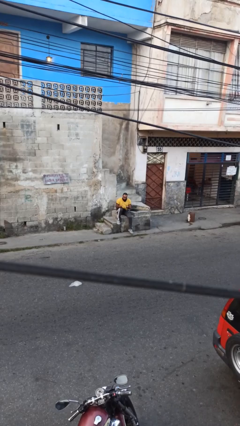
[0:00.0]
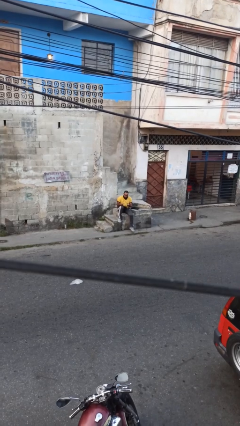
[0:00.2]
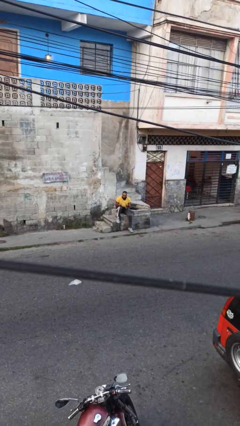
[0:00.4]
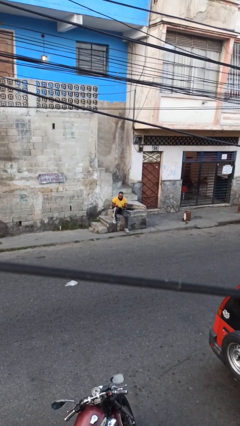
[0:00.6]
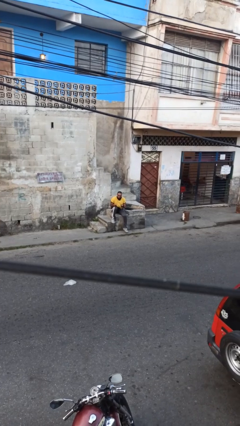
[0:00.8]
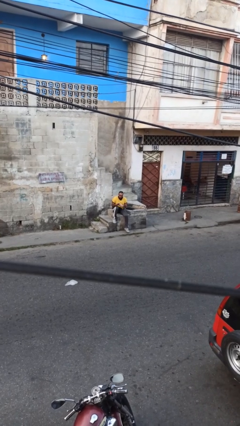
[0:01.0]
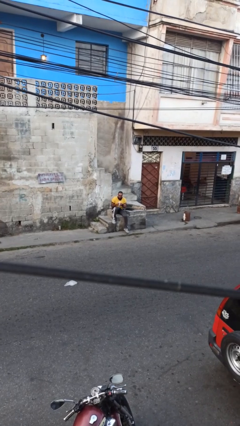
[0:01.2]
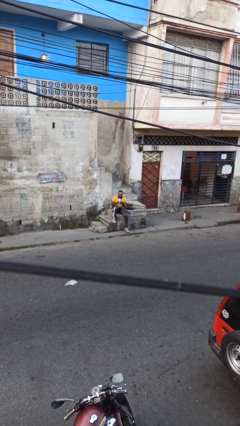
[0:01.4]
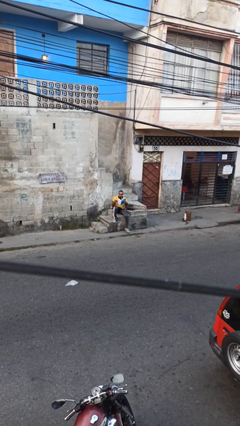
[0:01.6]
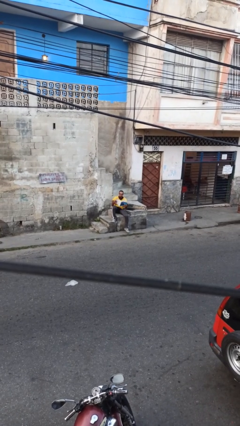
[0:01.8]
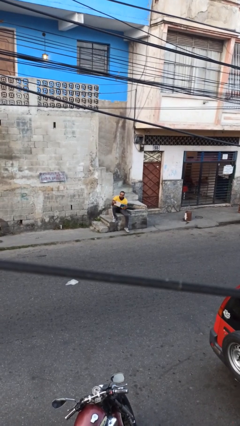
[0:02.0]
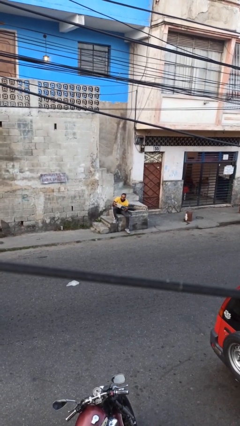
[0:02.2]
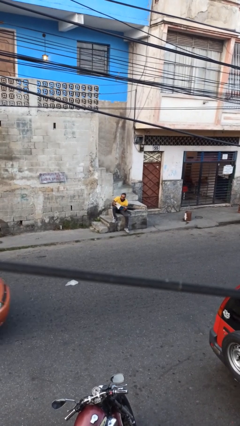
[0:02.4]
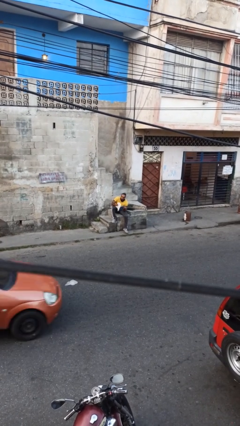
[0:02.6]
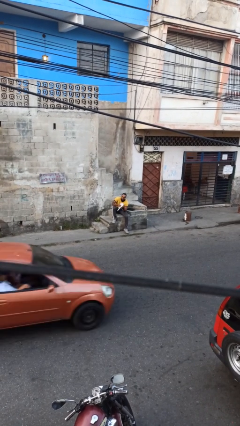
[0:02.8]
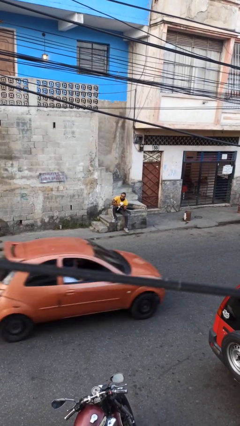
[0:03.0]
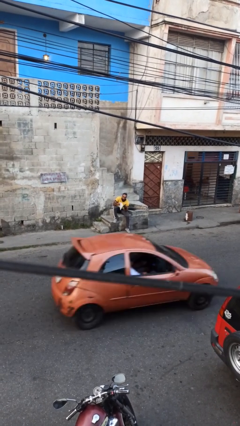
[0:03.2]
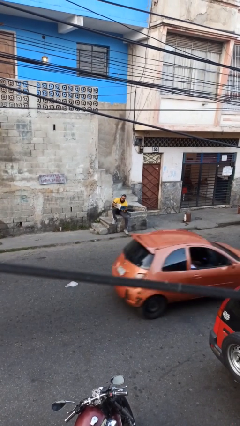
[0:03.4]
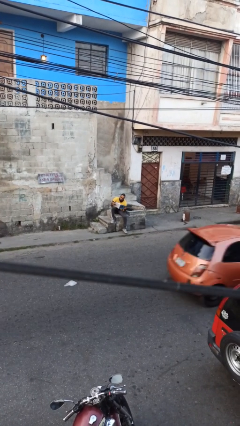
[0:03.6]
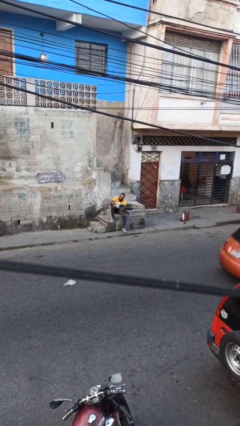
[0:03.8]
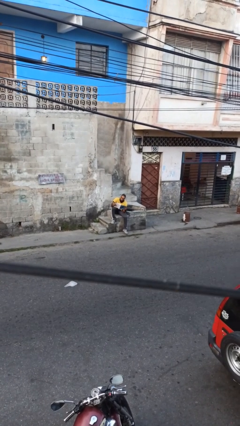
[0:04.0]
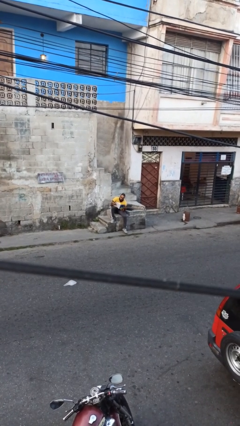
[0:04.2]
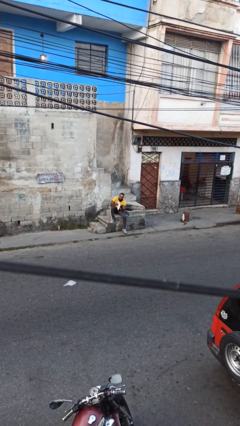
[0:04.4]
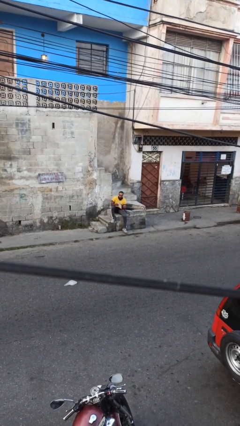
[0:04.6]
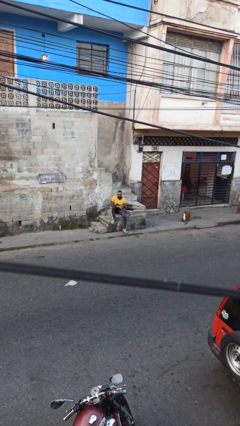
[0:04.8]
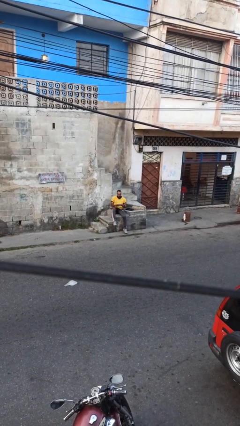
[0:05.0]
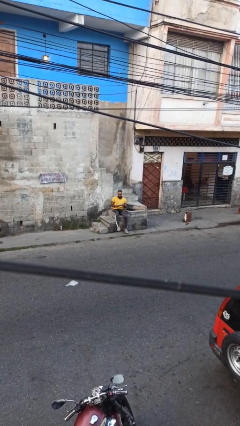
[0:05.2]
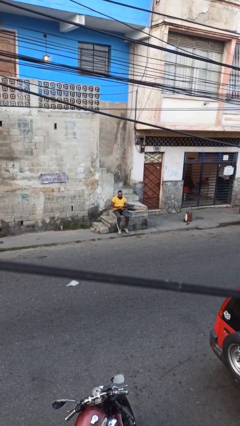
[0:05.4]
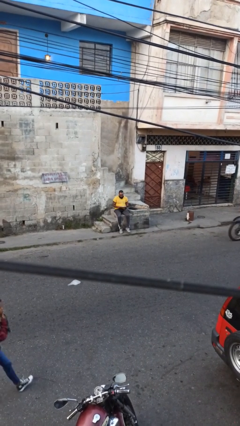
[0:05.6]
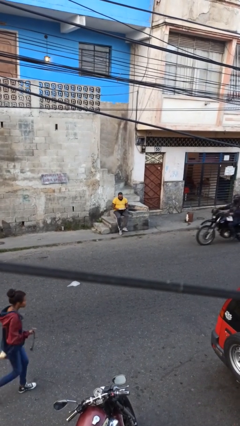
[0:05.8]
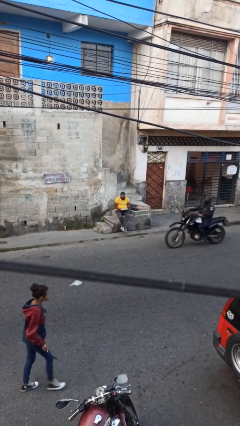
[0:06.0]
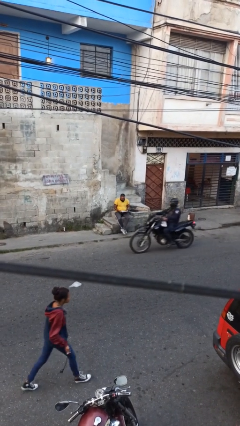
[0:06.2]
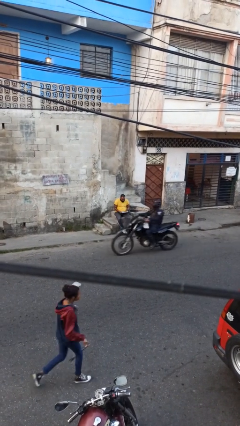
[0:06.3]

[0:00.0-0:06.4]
person reads document

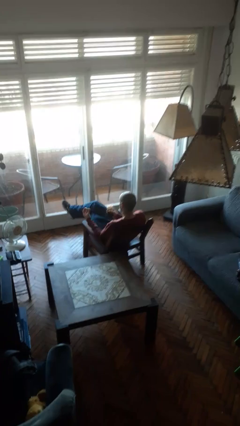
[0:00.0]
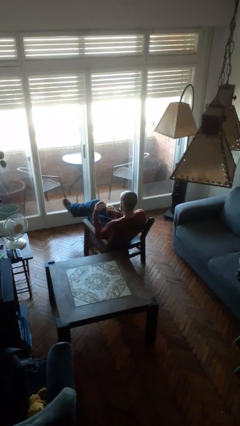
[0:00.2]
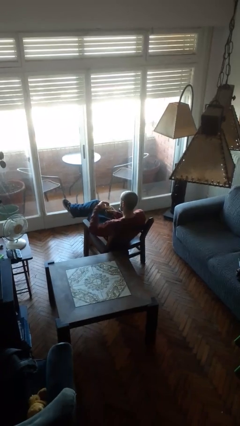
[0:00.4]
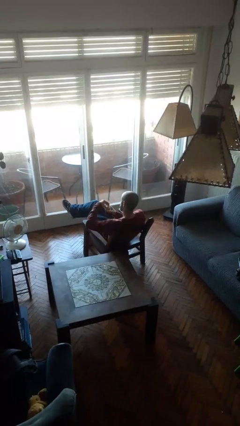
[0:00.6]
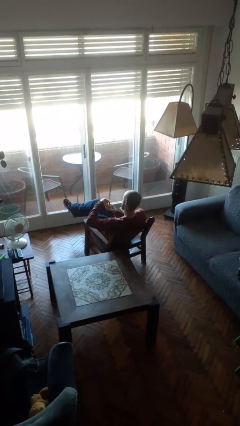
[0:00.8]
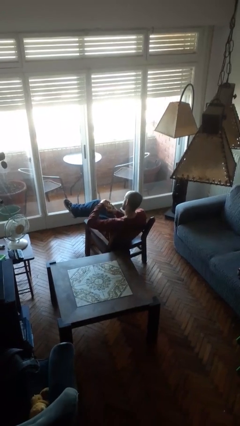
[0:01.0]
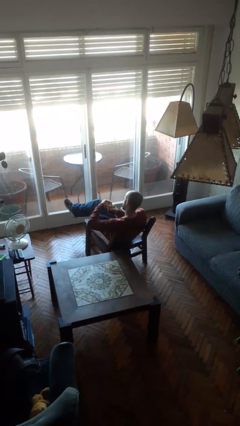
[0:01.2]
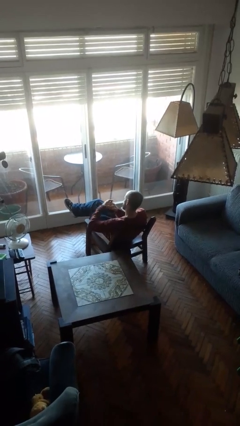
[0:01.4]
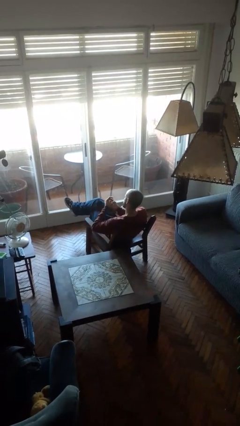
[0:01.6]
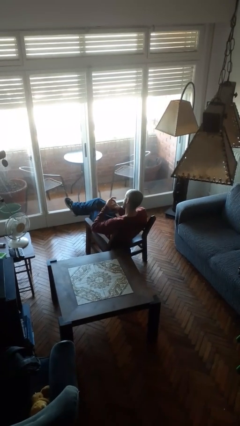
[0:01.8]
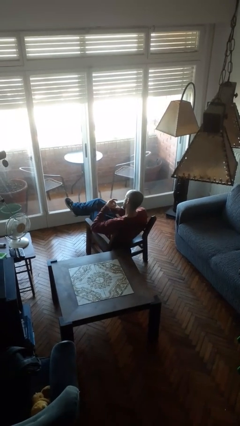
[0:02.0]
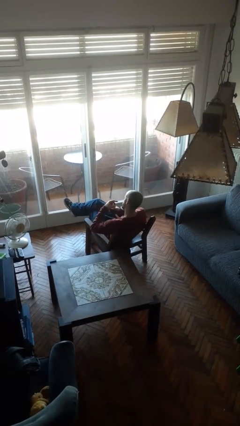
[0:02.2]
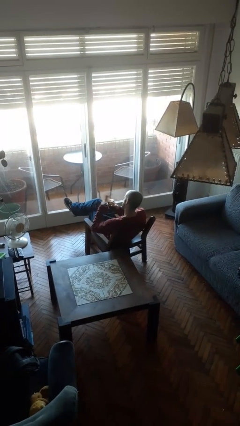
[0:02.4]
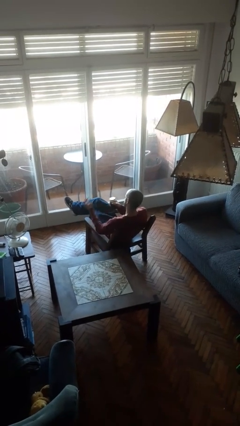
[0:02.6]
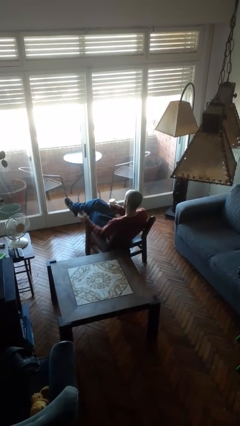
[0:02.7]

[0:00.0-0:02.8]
person closes jar

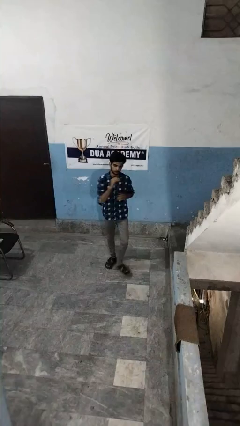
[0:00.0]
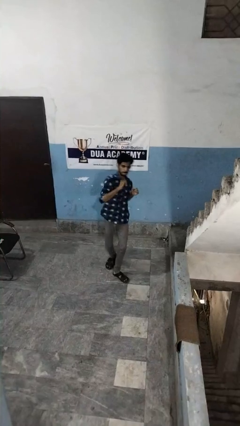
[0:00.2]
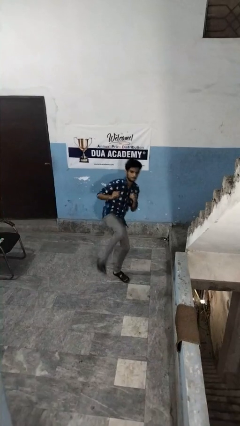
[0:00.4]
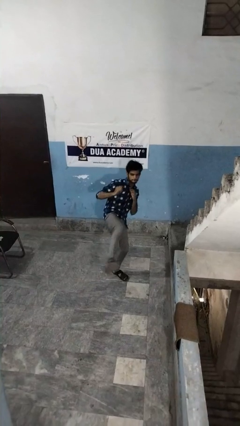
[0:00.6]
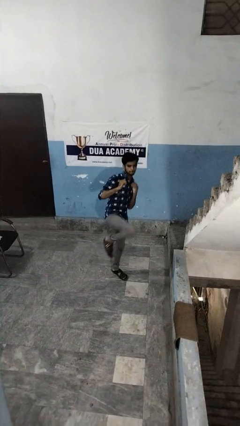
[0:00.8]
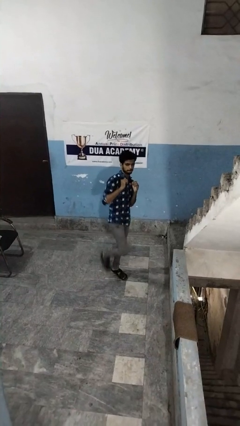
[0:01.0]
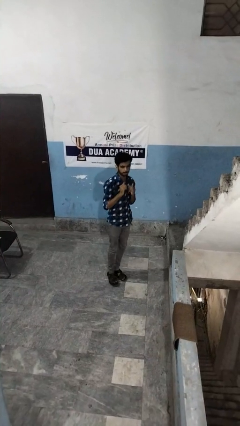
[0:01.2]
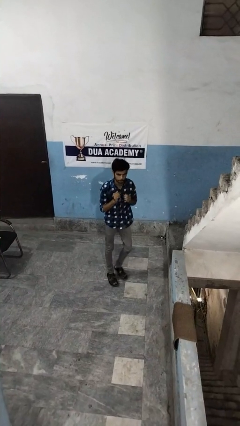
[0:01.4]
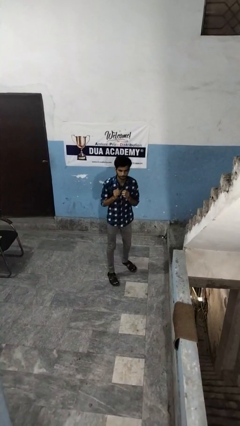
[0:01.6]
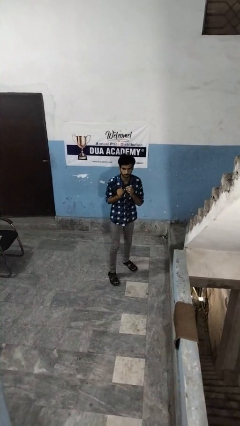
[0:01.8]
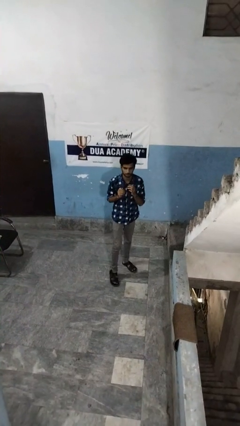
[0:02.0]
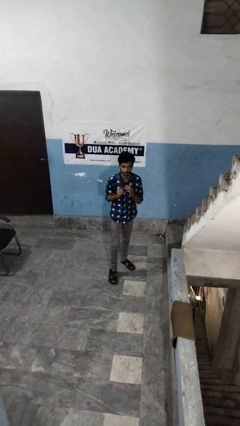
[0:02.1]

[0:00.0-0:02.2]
person karate kicks

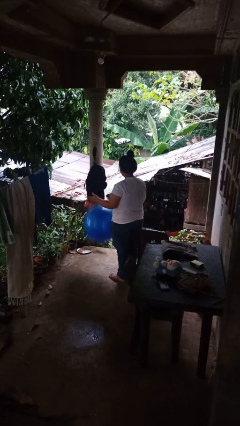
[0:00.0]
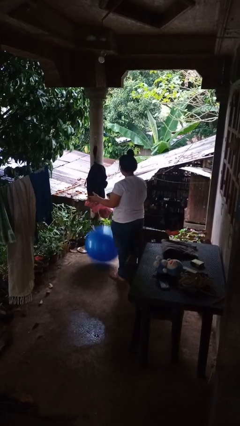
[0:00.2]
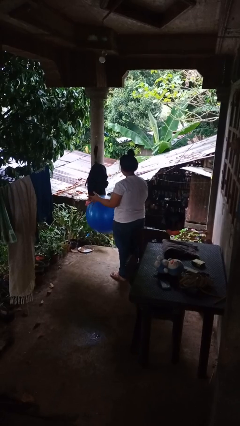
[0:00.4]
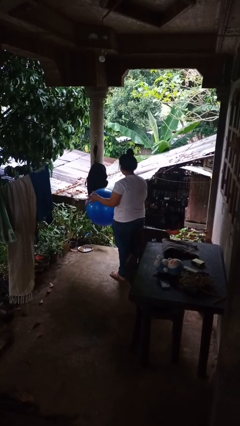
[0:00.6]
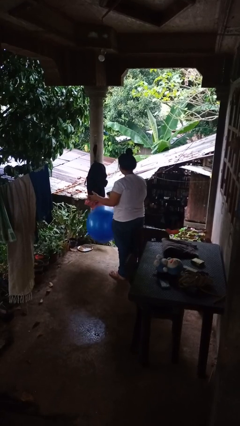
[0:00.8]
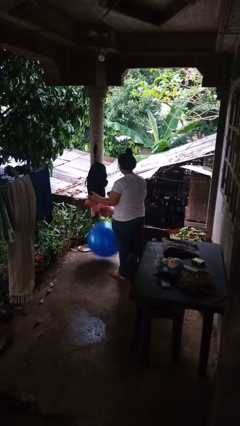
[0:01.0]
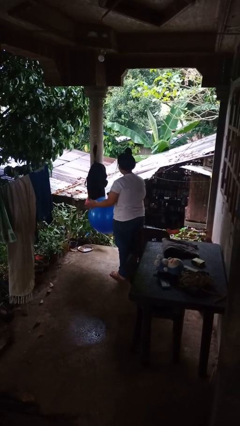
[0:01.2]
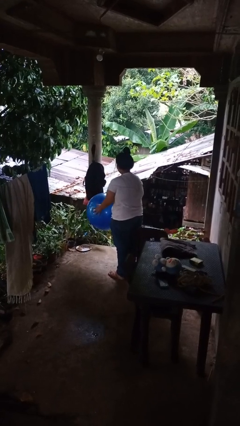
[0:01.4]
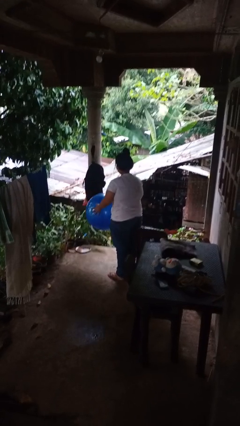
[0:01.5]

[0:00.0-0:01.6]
person bounces ball on floor

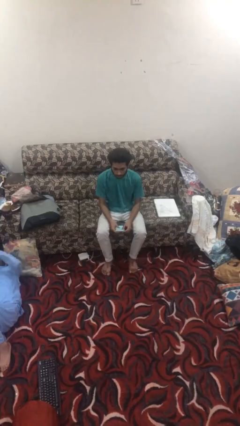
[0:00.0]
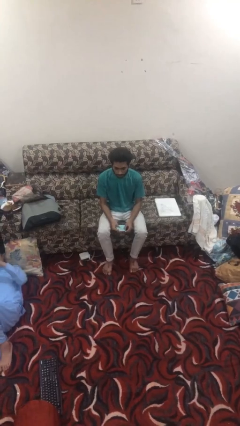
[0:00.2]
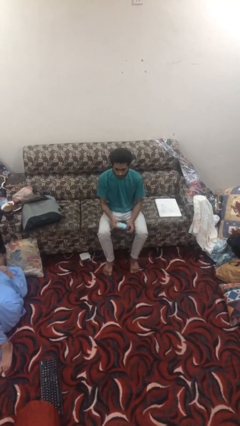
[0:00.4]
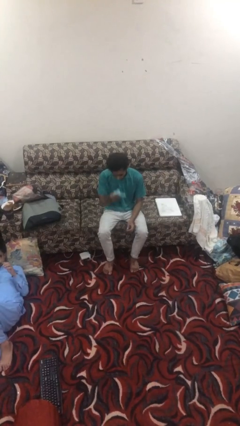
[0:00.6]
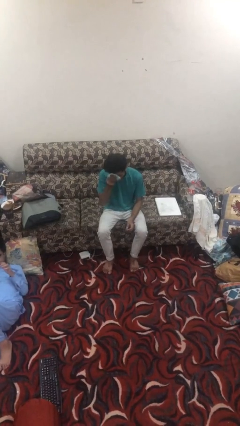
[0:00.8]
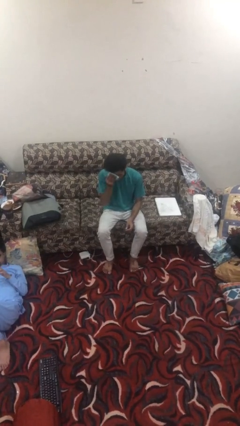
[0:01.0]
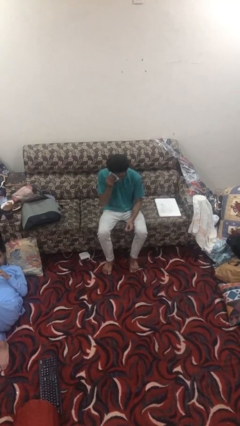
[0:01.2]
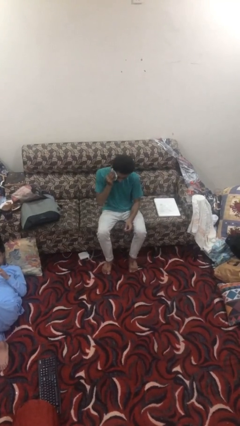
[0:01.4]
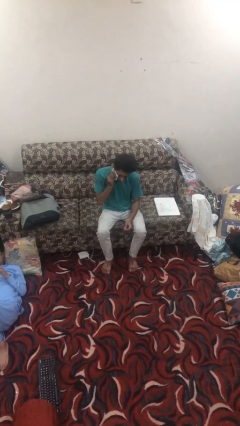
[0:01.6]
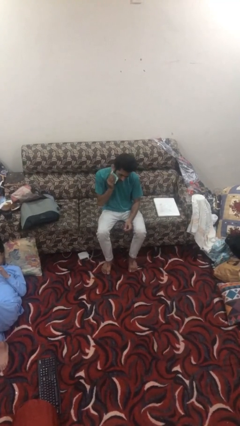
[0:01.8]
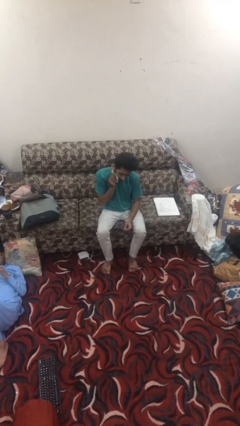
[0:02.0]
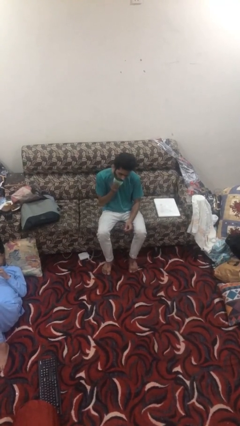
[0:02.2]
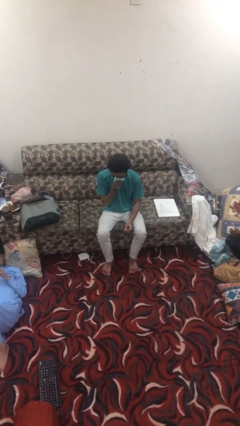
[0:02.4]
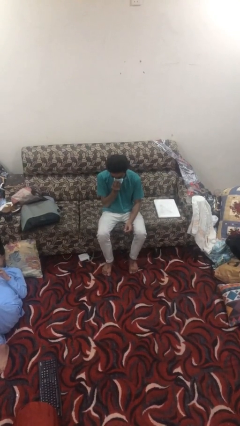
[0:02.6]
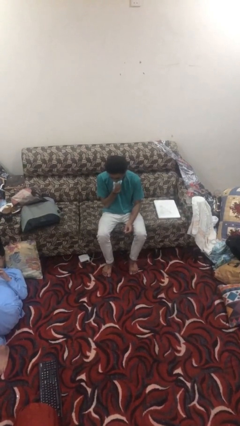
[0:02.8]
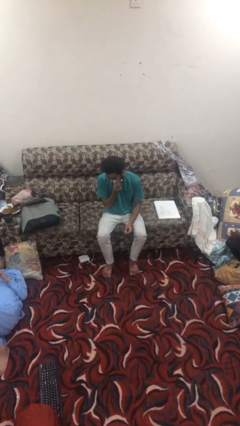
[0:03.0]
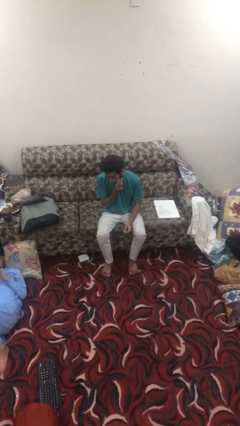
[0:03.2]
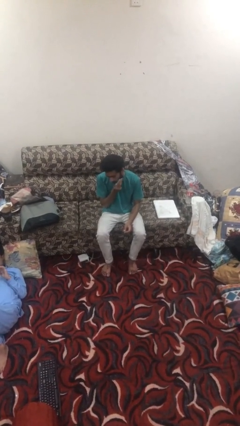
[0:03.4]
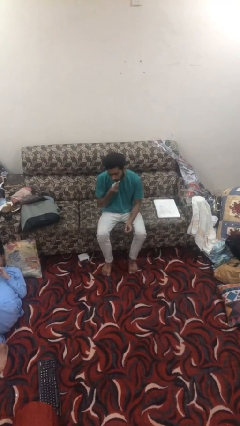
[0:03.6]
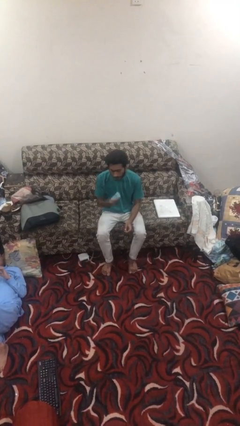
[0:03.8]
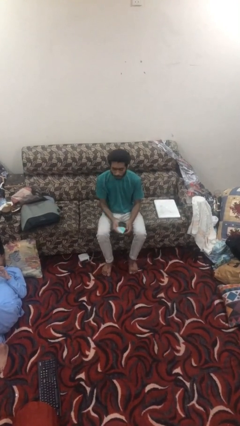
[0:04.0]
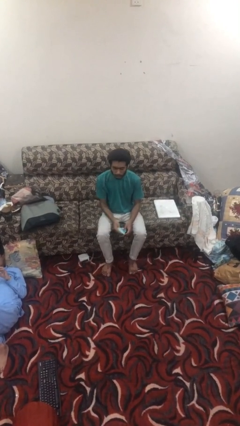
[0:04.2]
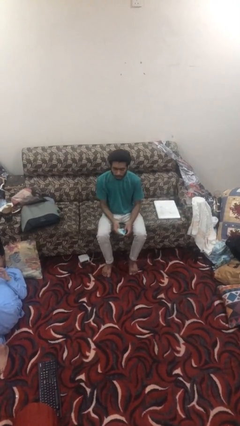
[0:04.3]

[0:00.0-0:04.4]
person wipes mouth with napkin
